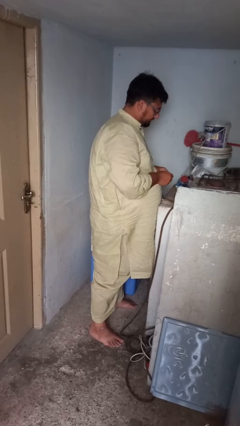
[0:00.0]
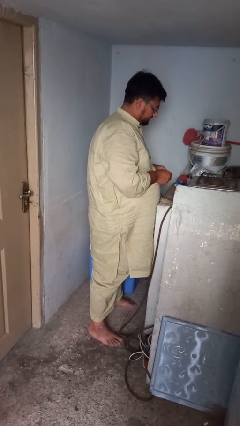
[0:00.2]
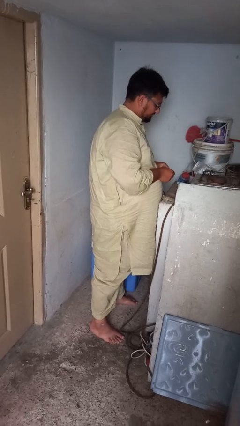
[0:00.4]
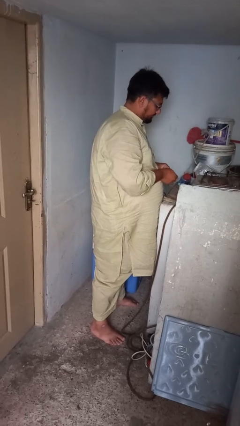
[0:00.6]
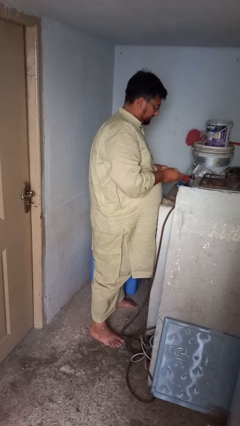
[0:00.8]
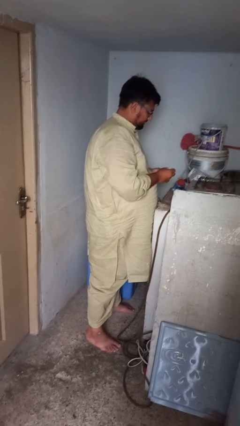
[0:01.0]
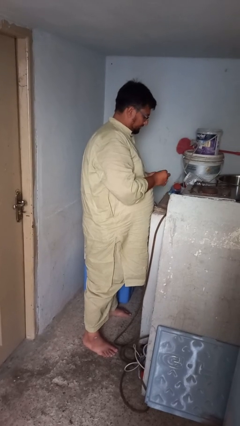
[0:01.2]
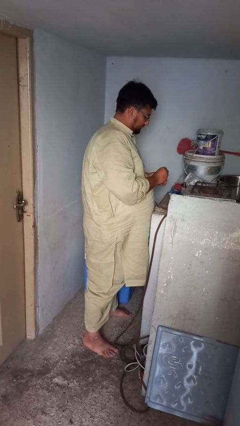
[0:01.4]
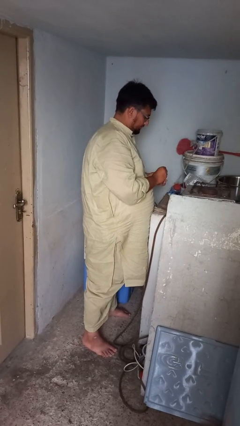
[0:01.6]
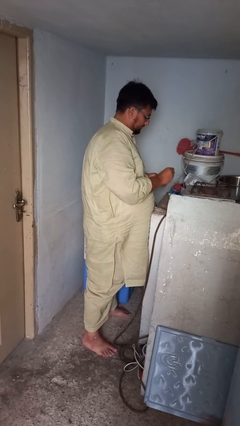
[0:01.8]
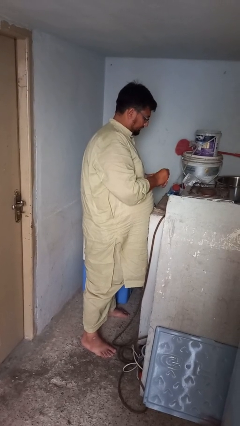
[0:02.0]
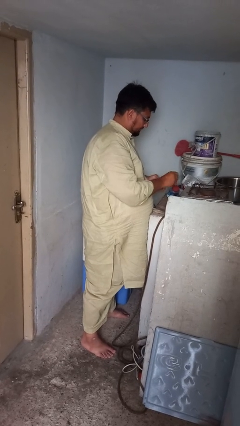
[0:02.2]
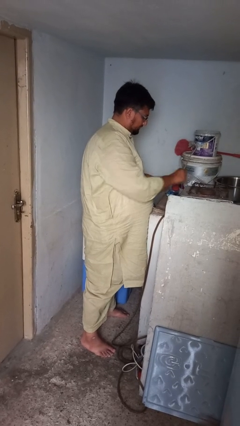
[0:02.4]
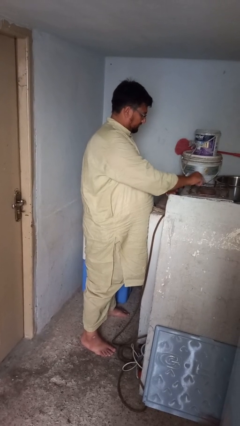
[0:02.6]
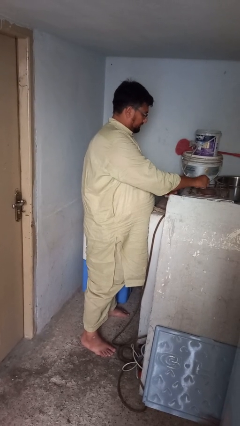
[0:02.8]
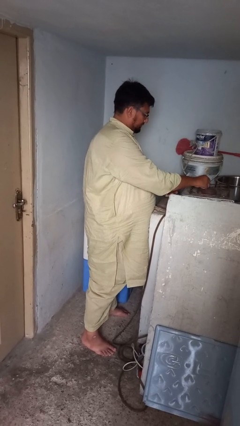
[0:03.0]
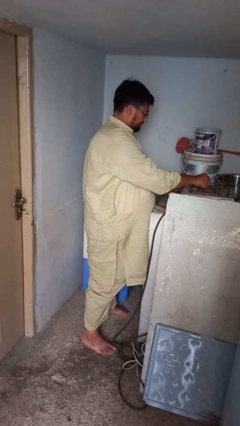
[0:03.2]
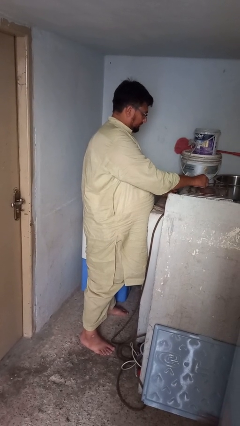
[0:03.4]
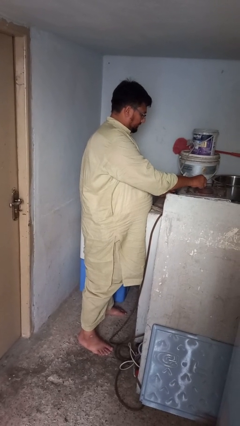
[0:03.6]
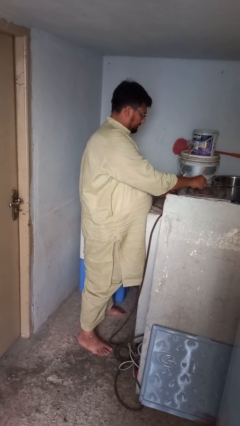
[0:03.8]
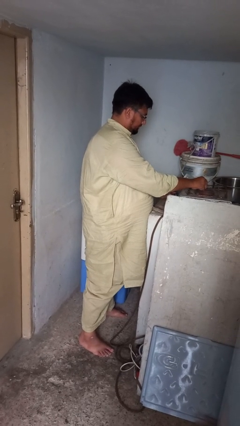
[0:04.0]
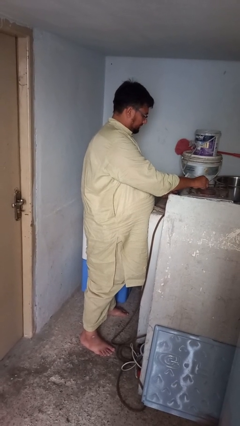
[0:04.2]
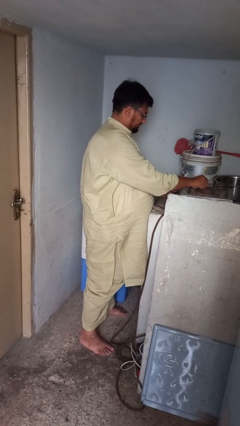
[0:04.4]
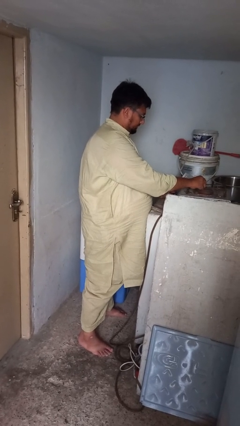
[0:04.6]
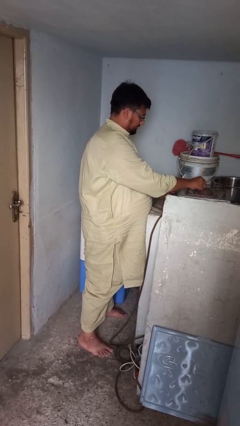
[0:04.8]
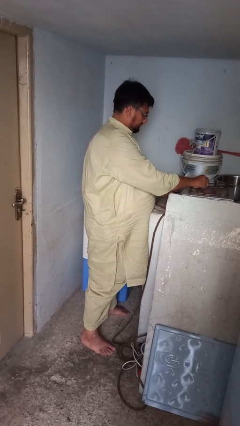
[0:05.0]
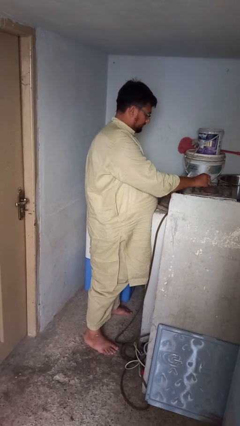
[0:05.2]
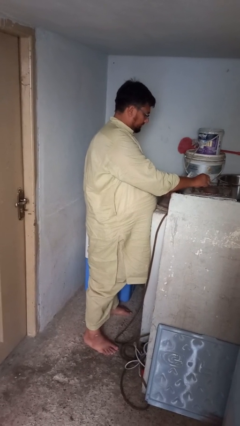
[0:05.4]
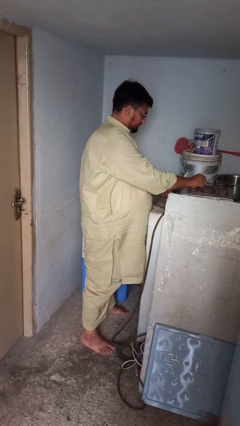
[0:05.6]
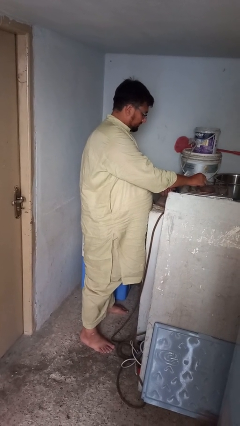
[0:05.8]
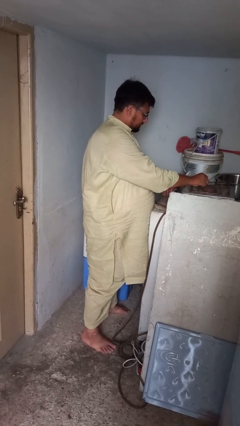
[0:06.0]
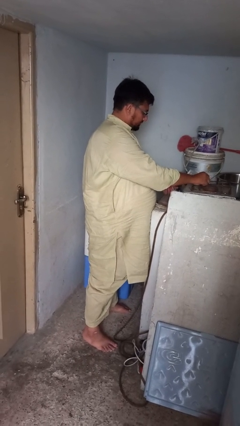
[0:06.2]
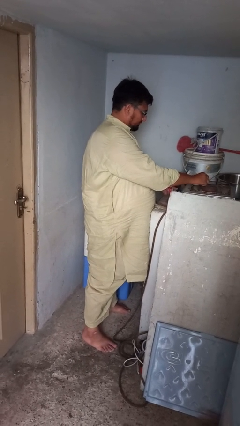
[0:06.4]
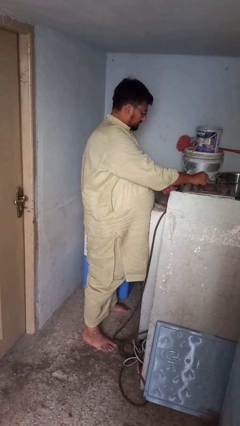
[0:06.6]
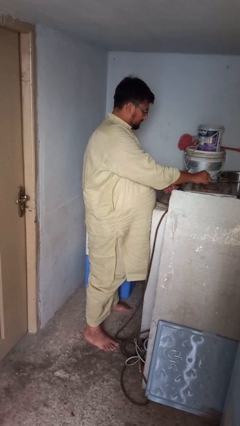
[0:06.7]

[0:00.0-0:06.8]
person turns on stovetop

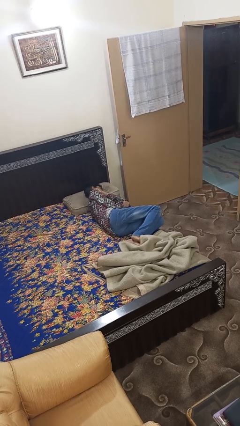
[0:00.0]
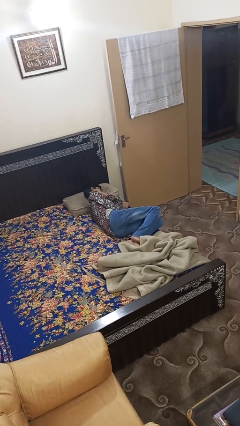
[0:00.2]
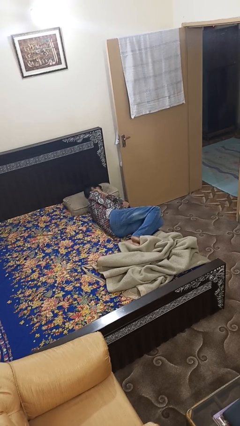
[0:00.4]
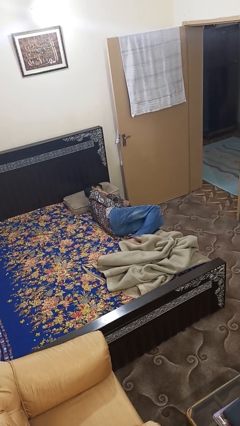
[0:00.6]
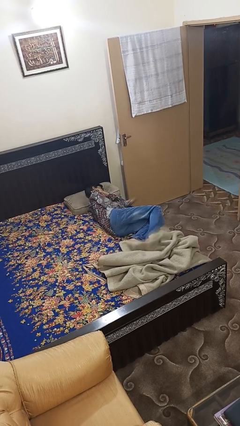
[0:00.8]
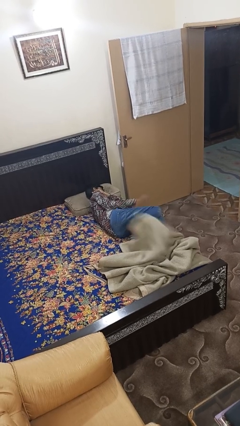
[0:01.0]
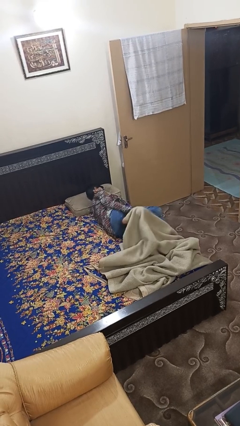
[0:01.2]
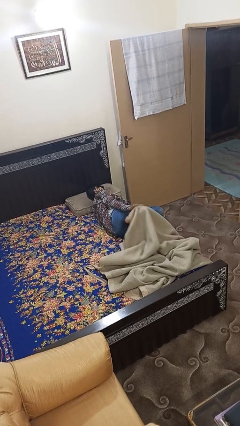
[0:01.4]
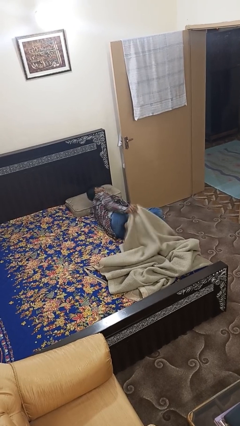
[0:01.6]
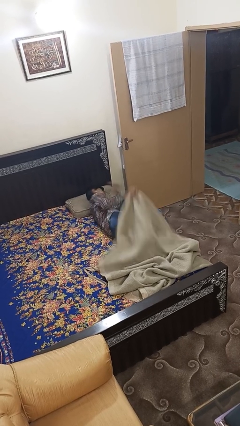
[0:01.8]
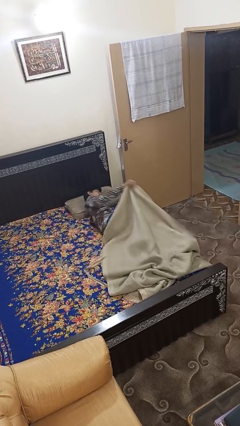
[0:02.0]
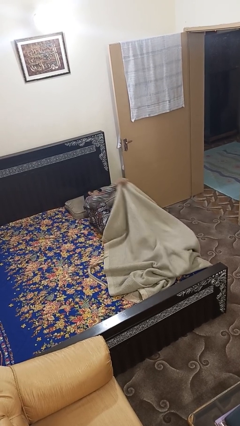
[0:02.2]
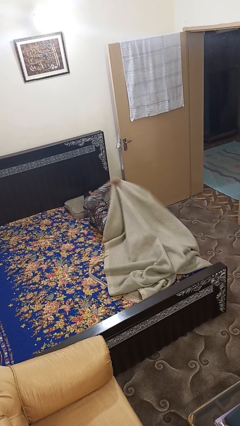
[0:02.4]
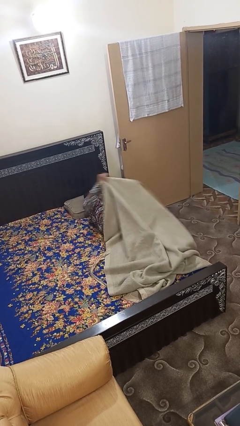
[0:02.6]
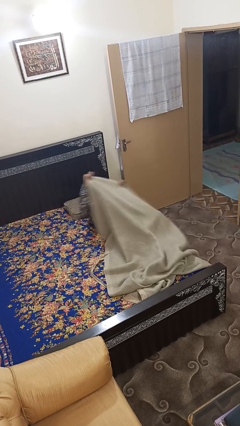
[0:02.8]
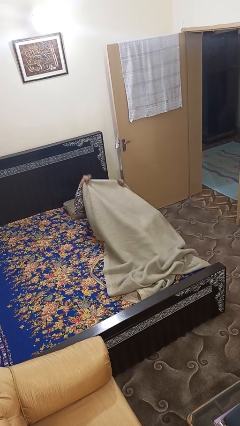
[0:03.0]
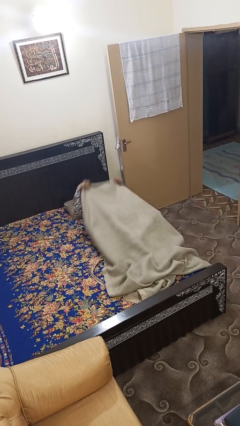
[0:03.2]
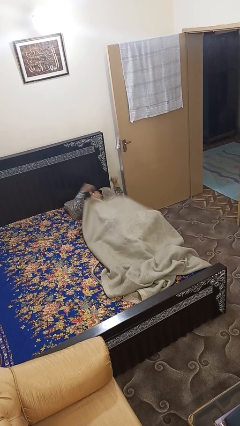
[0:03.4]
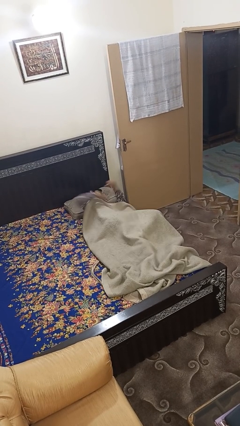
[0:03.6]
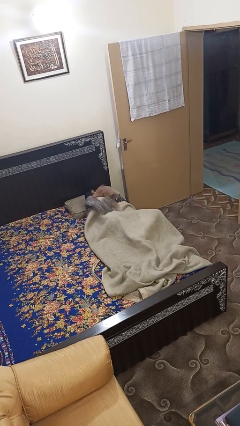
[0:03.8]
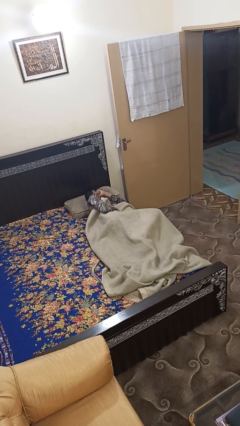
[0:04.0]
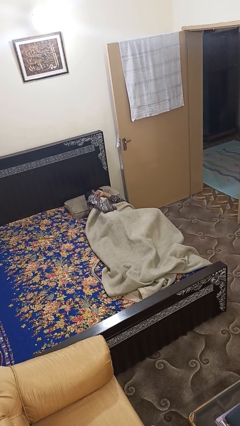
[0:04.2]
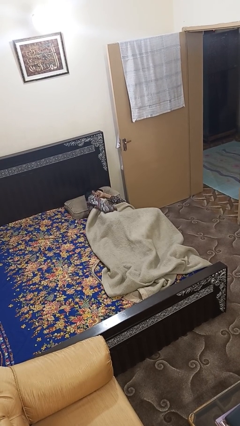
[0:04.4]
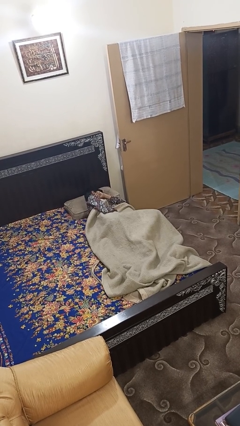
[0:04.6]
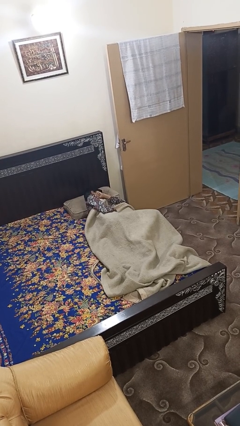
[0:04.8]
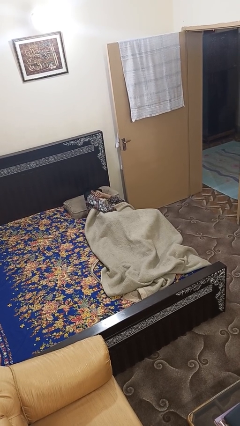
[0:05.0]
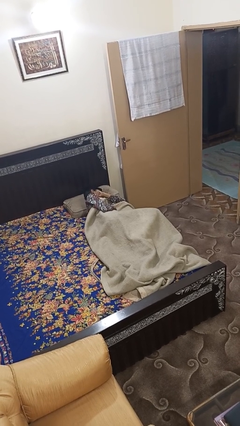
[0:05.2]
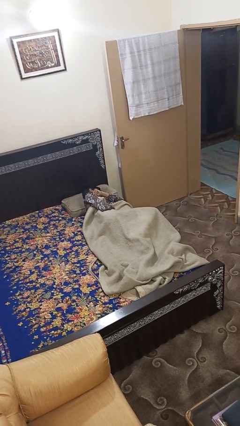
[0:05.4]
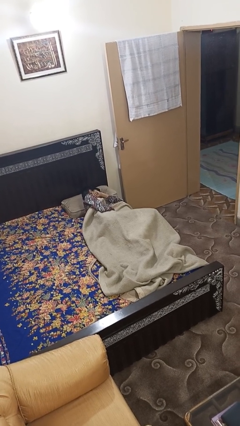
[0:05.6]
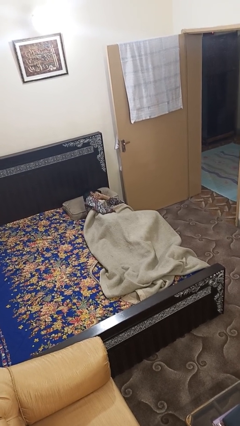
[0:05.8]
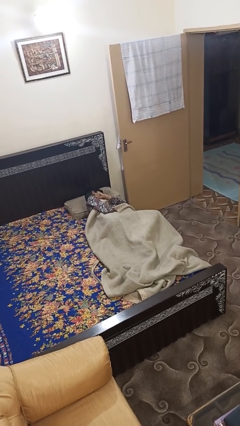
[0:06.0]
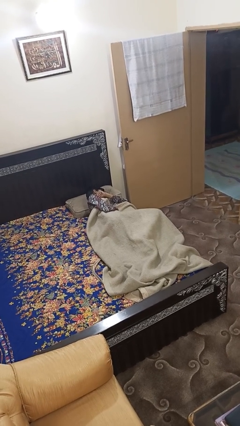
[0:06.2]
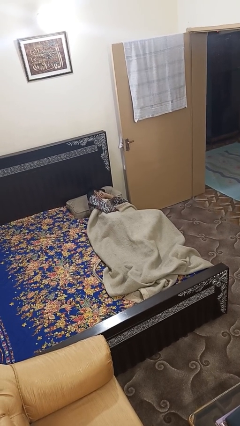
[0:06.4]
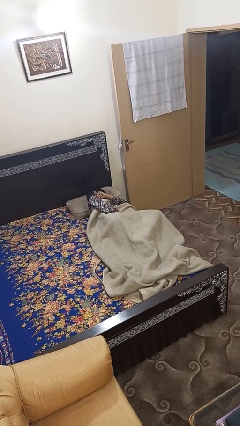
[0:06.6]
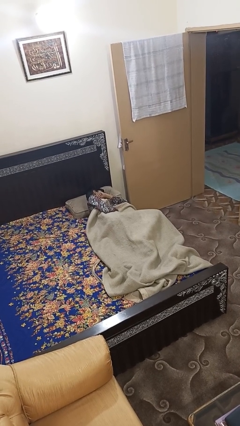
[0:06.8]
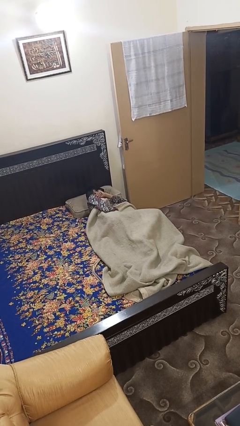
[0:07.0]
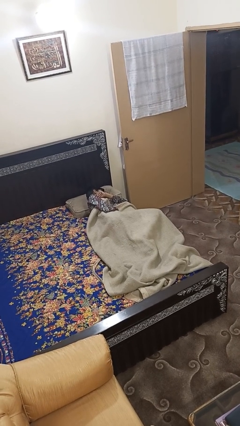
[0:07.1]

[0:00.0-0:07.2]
person covers with bedsheets

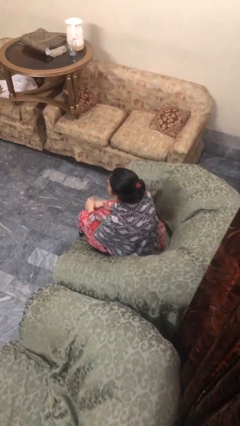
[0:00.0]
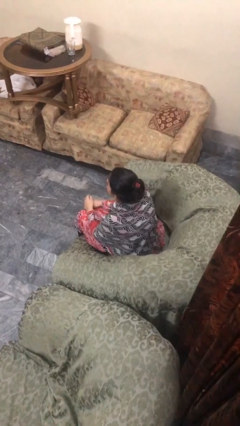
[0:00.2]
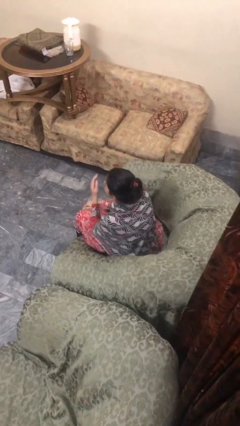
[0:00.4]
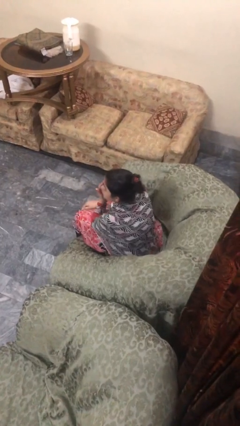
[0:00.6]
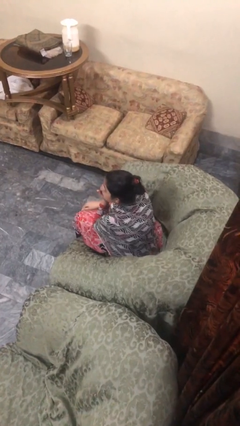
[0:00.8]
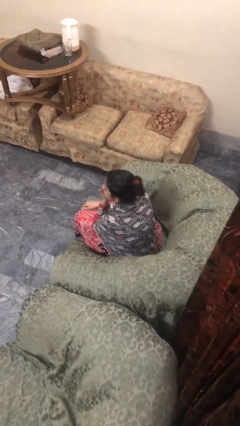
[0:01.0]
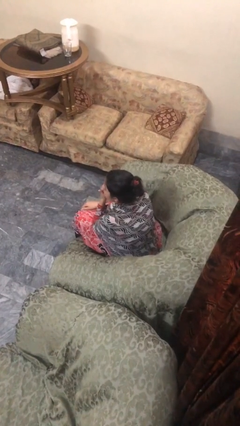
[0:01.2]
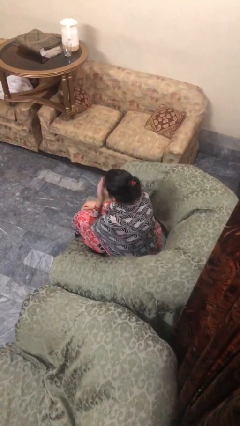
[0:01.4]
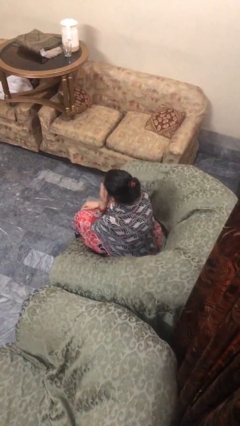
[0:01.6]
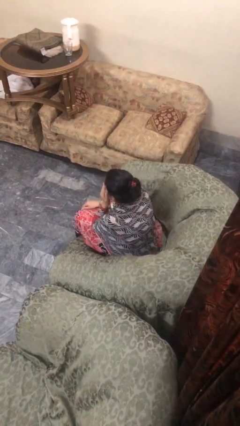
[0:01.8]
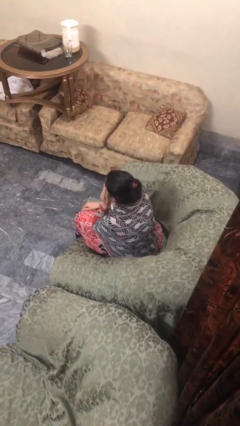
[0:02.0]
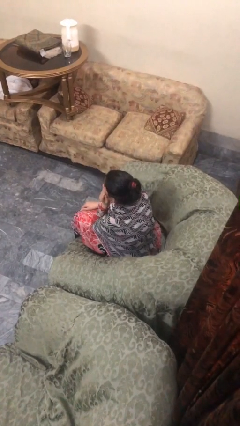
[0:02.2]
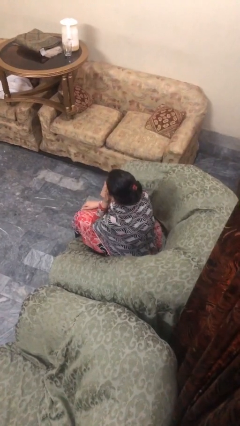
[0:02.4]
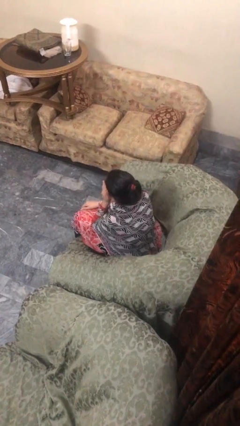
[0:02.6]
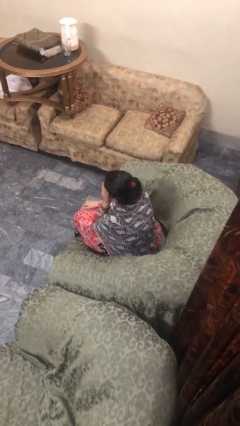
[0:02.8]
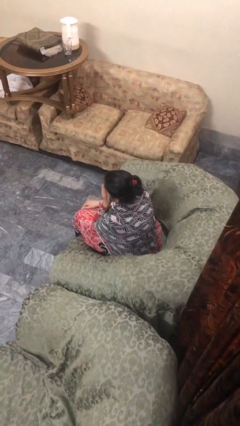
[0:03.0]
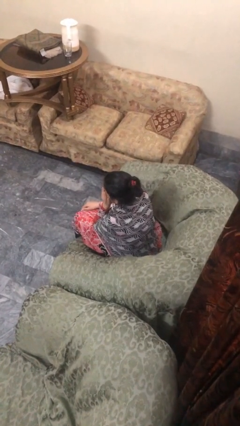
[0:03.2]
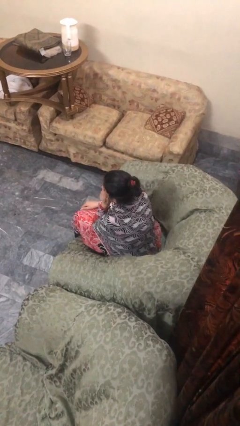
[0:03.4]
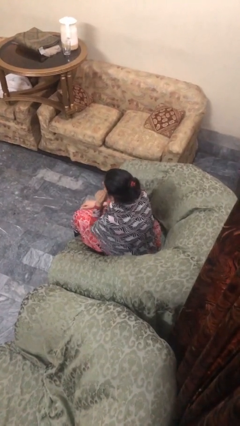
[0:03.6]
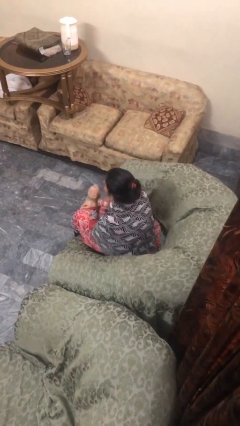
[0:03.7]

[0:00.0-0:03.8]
person rubs eyes

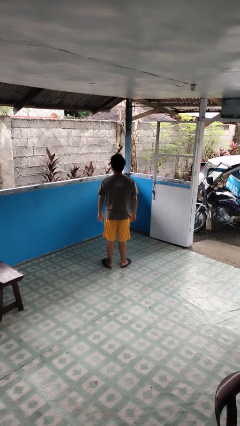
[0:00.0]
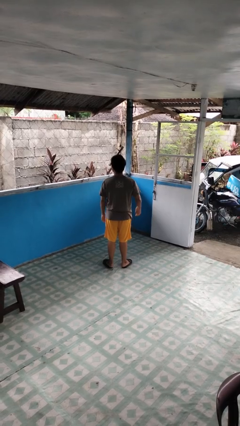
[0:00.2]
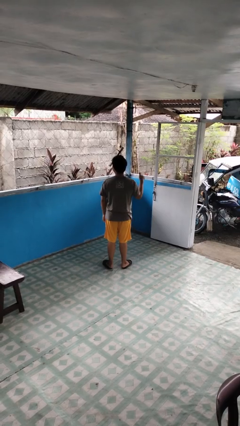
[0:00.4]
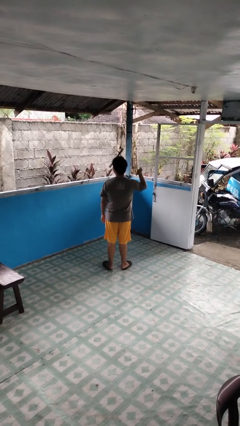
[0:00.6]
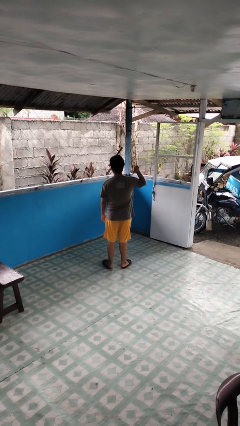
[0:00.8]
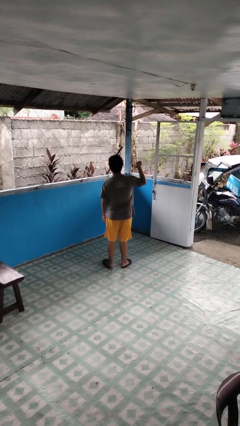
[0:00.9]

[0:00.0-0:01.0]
person gestures behind me
